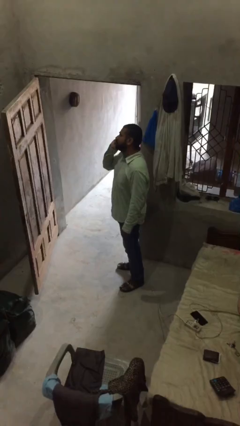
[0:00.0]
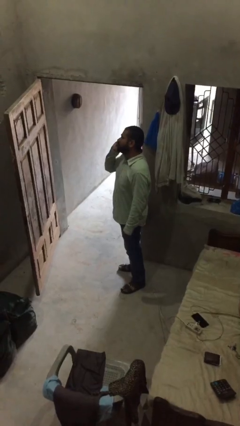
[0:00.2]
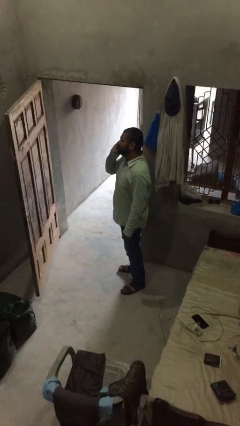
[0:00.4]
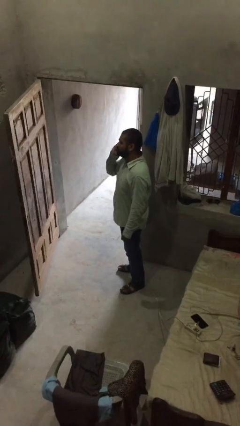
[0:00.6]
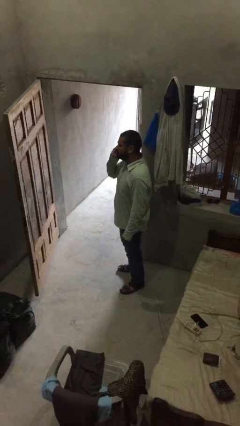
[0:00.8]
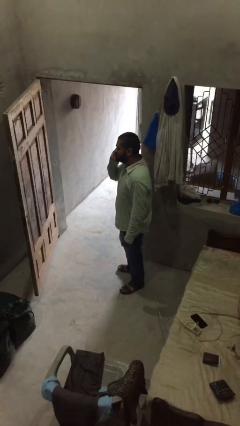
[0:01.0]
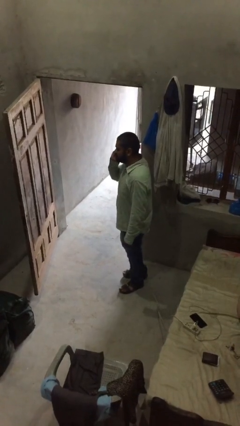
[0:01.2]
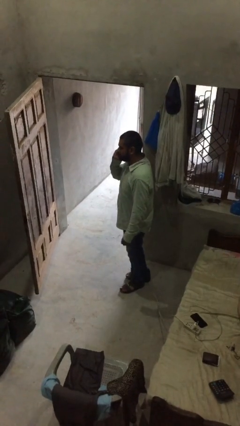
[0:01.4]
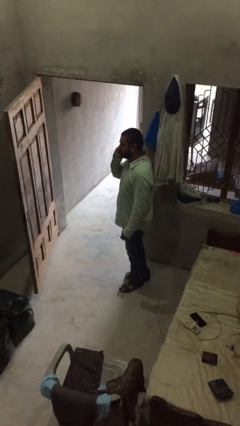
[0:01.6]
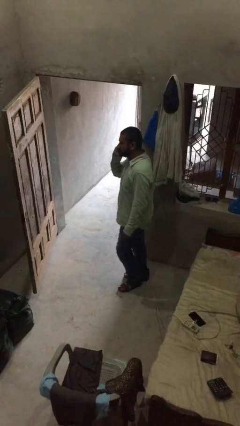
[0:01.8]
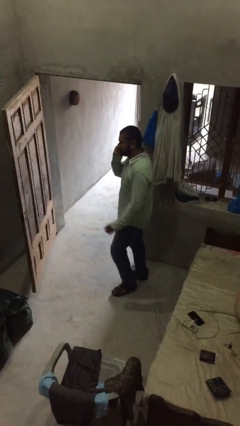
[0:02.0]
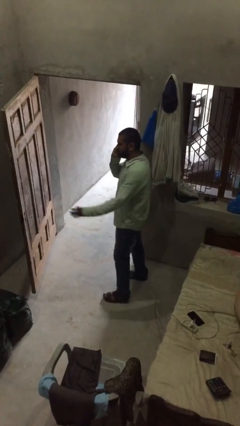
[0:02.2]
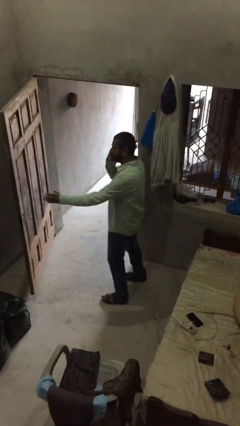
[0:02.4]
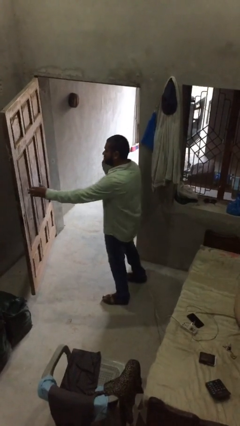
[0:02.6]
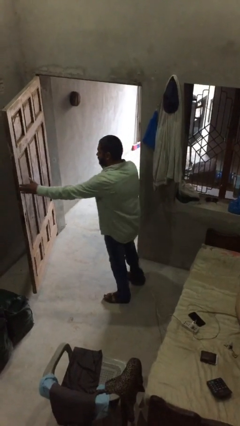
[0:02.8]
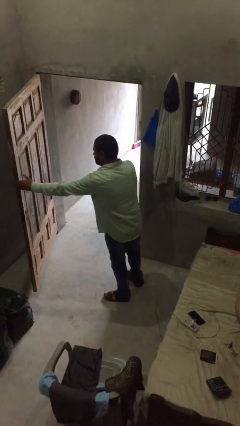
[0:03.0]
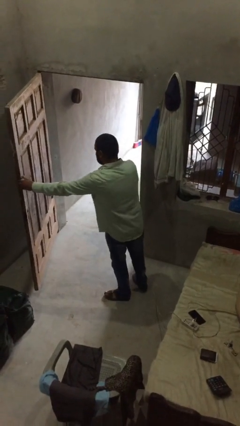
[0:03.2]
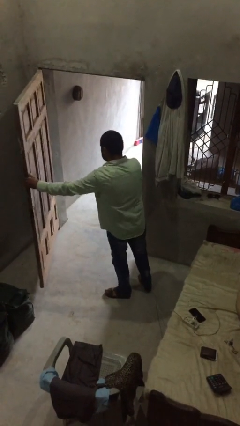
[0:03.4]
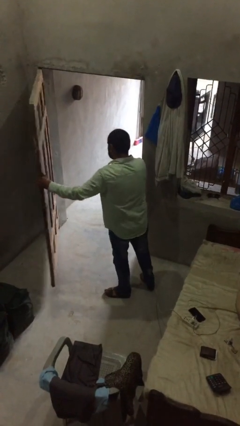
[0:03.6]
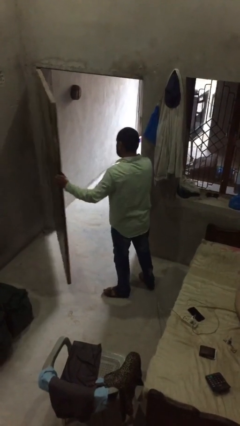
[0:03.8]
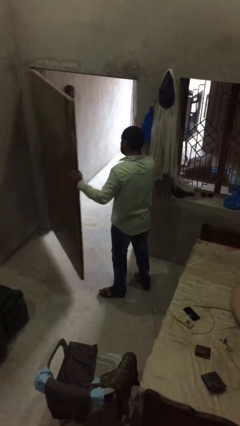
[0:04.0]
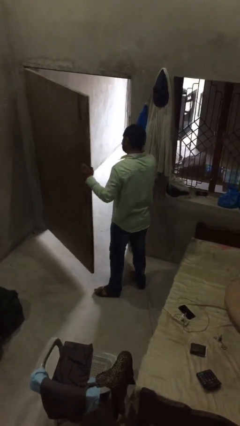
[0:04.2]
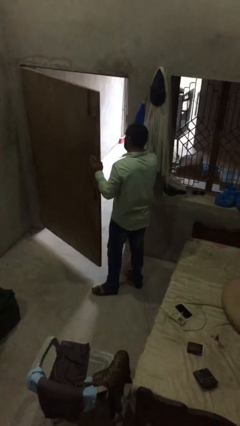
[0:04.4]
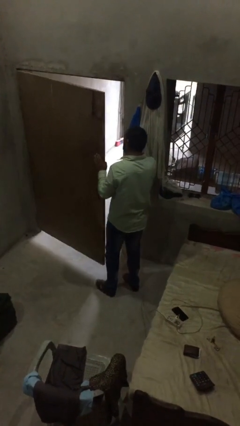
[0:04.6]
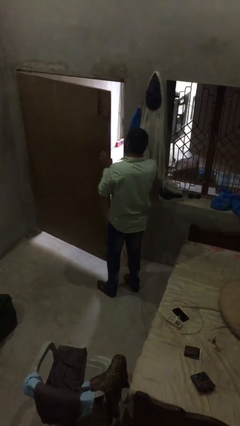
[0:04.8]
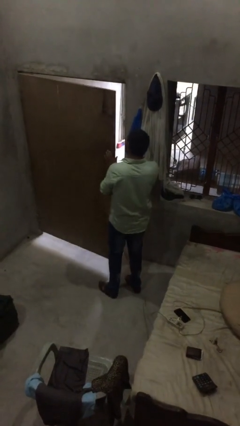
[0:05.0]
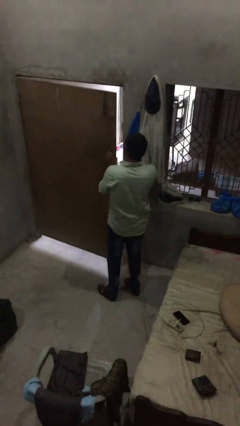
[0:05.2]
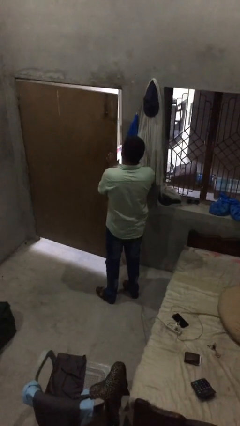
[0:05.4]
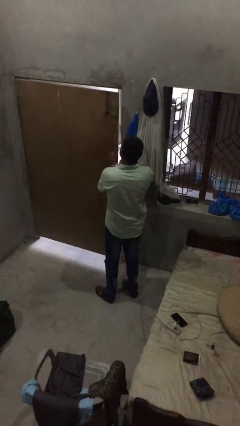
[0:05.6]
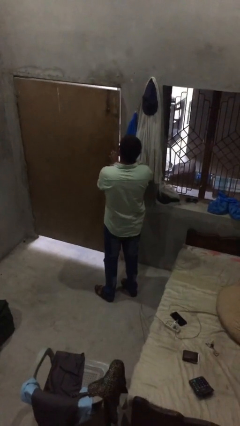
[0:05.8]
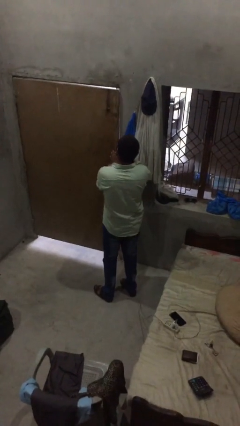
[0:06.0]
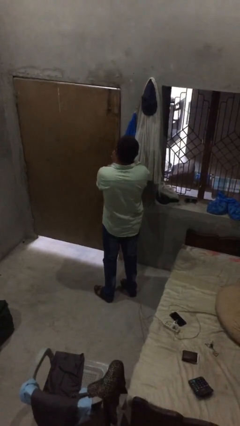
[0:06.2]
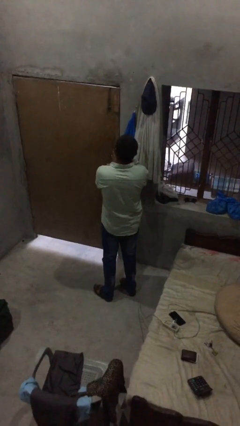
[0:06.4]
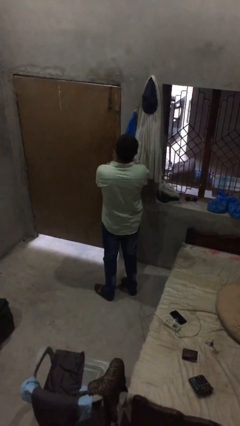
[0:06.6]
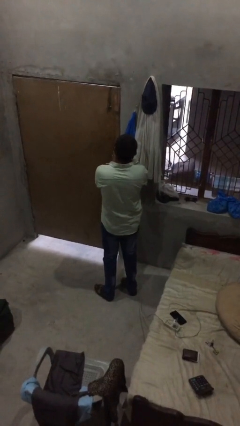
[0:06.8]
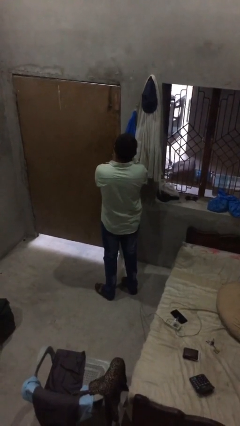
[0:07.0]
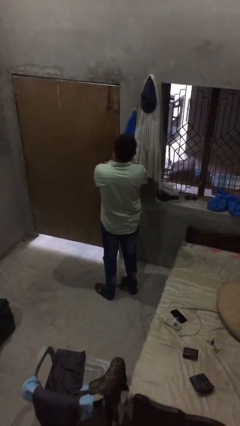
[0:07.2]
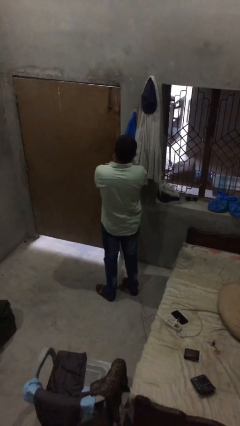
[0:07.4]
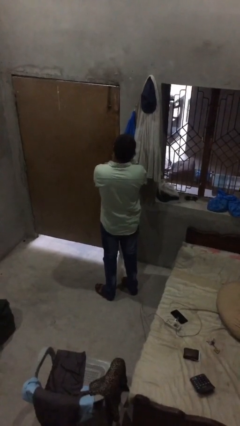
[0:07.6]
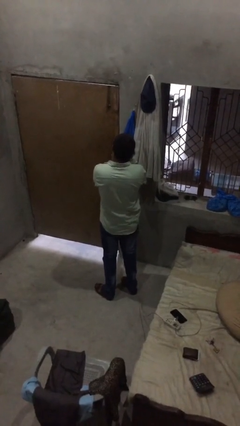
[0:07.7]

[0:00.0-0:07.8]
person closes facility door

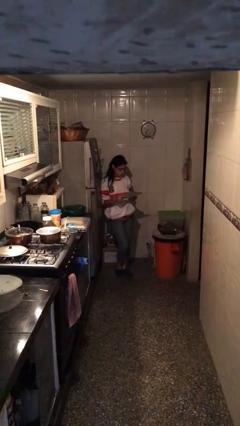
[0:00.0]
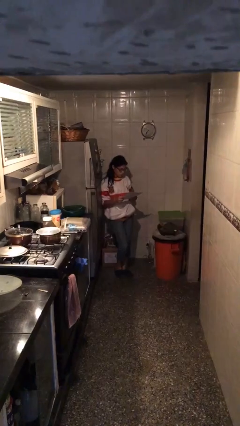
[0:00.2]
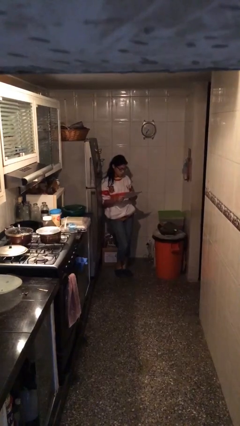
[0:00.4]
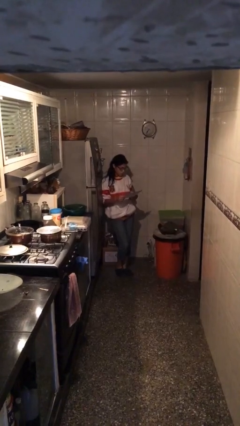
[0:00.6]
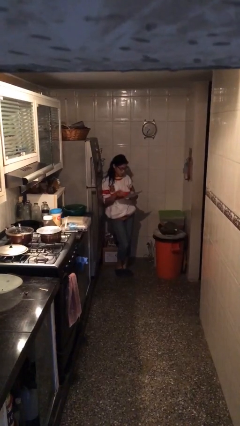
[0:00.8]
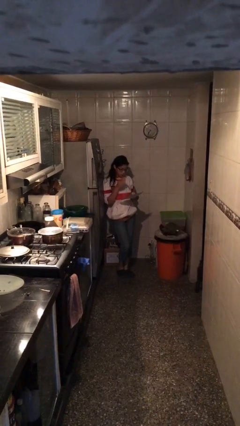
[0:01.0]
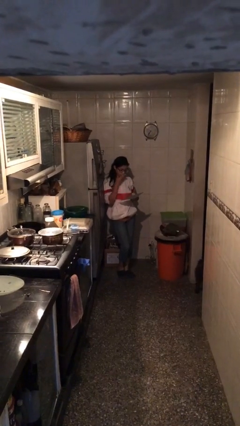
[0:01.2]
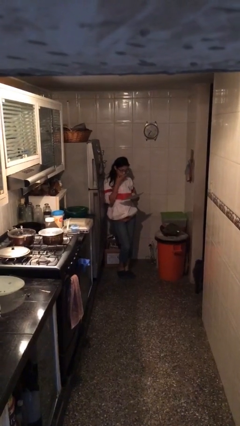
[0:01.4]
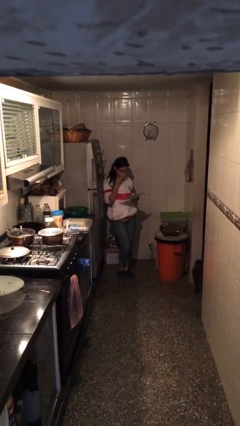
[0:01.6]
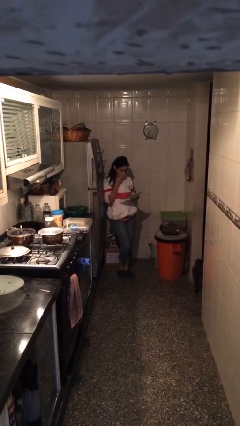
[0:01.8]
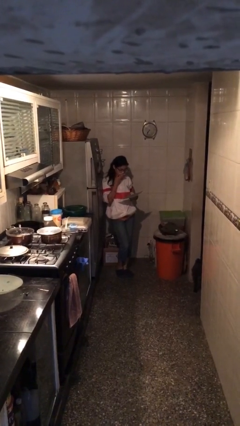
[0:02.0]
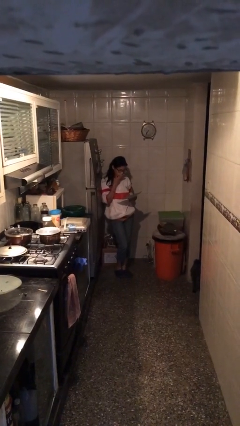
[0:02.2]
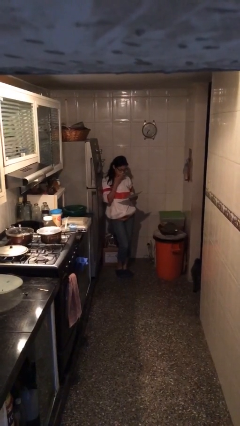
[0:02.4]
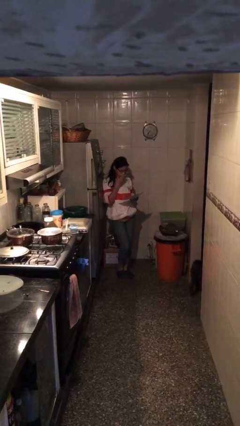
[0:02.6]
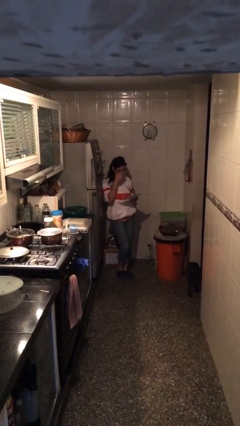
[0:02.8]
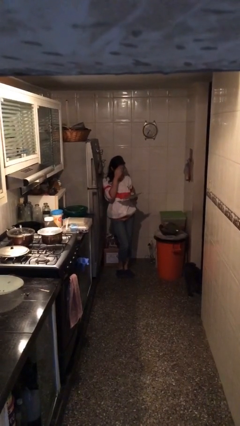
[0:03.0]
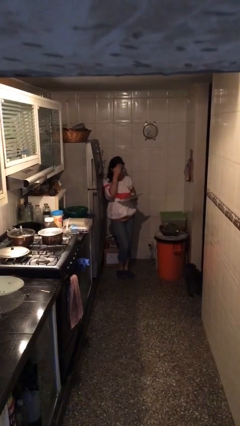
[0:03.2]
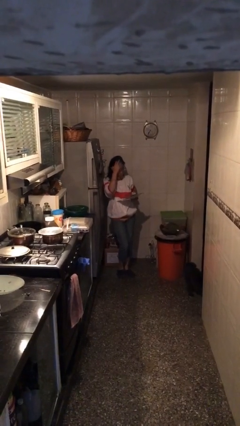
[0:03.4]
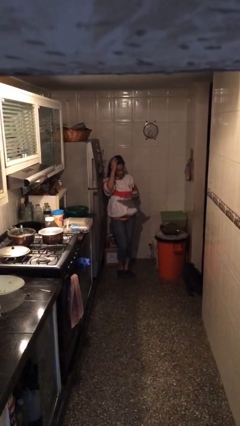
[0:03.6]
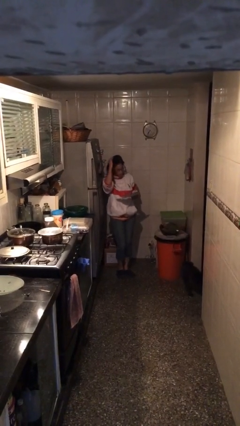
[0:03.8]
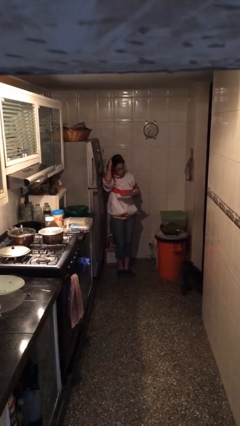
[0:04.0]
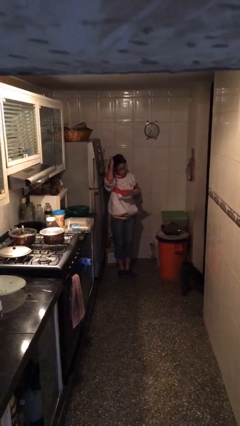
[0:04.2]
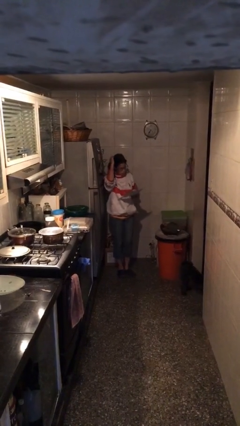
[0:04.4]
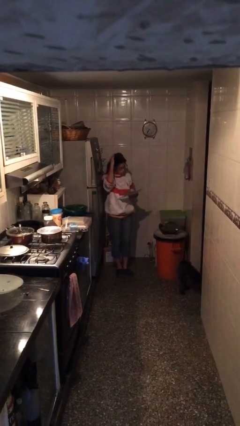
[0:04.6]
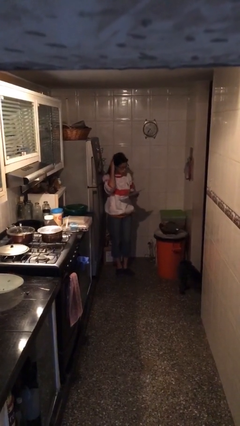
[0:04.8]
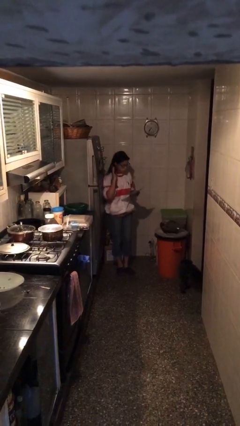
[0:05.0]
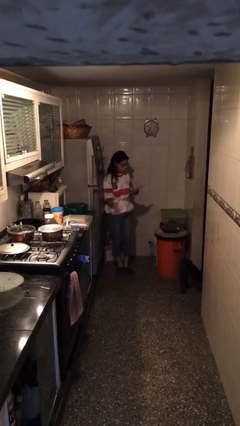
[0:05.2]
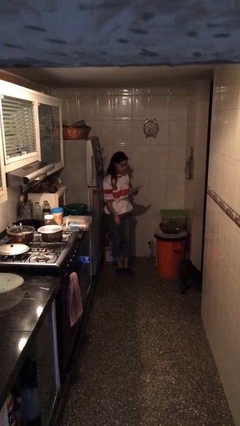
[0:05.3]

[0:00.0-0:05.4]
person reads document

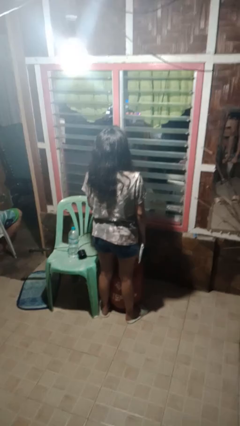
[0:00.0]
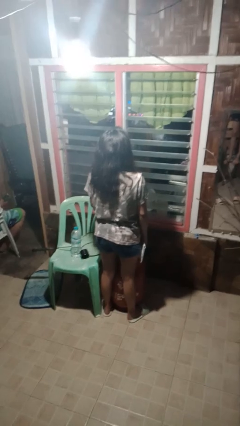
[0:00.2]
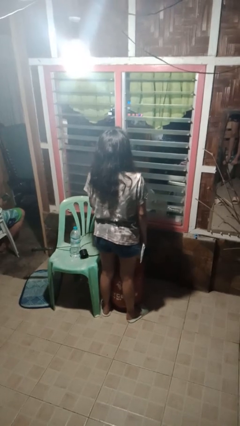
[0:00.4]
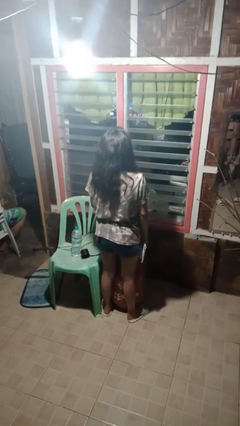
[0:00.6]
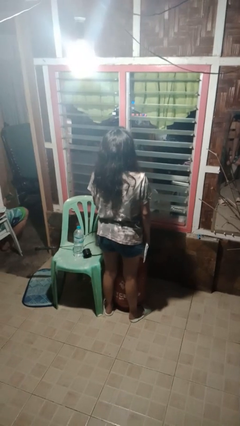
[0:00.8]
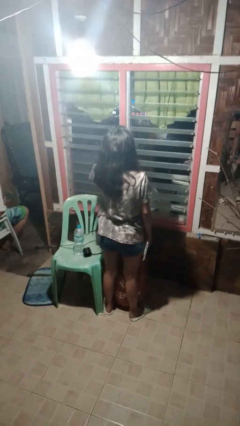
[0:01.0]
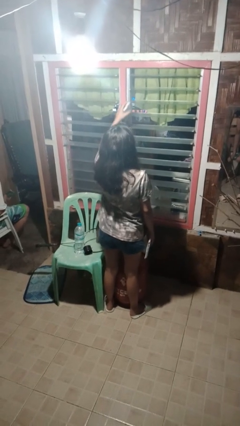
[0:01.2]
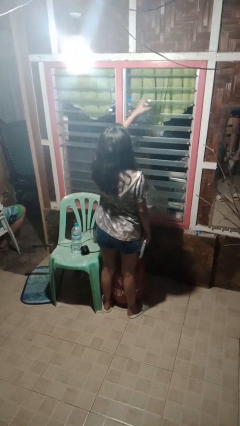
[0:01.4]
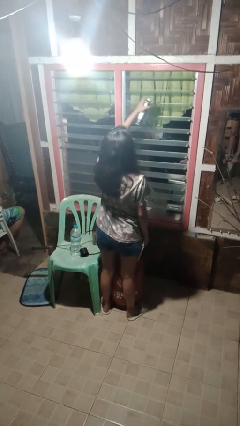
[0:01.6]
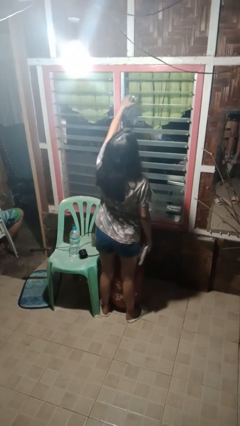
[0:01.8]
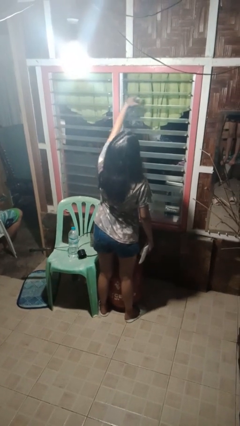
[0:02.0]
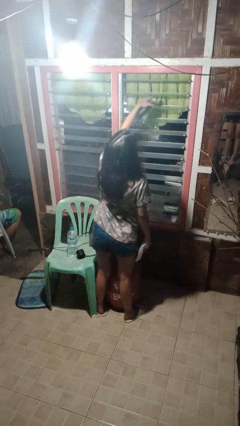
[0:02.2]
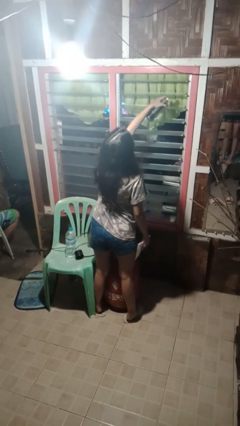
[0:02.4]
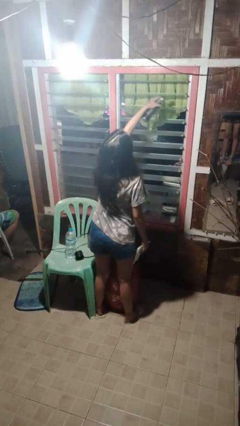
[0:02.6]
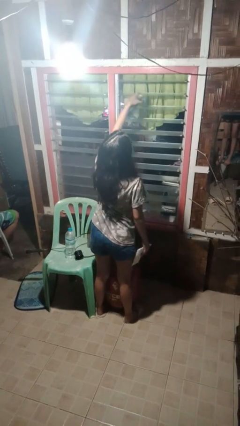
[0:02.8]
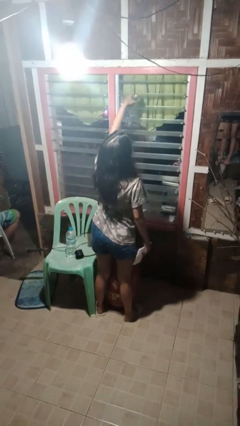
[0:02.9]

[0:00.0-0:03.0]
person sprays from bottle

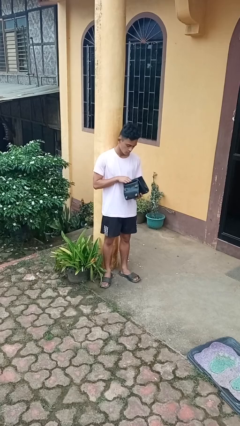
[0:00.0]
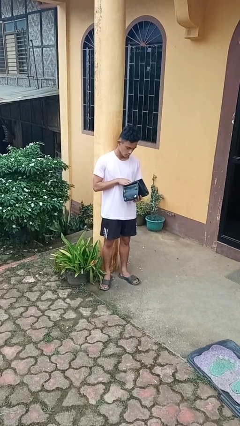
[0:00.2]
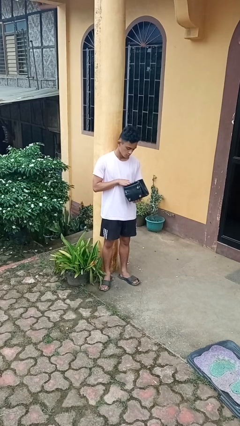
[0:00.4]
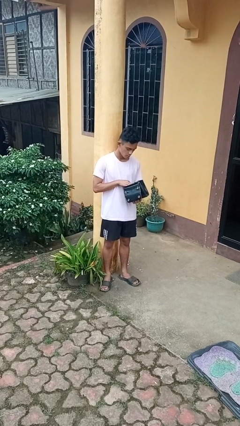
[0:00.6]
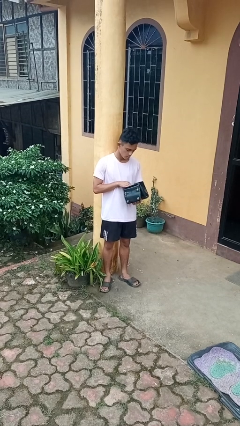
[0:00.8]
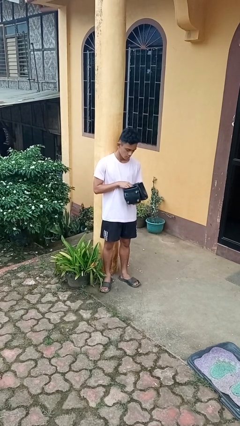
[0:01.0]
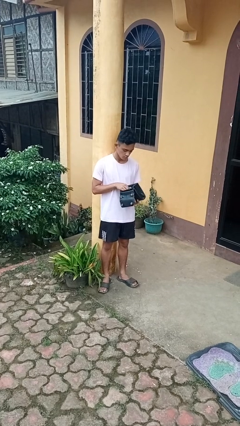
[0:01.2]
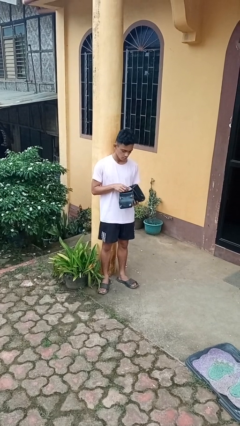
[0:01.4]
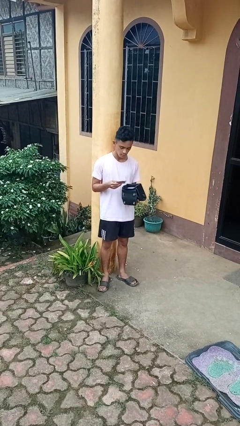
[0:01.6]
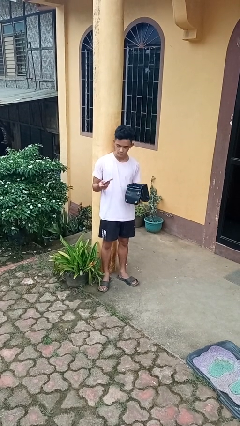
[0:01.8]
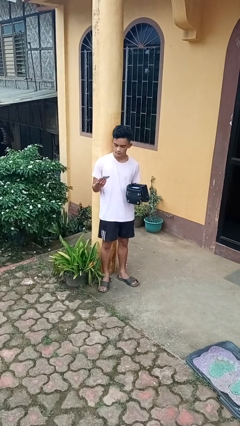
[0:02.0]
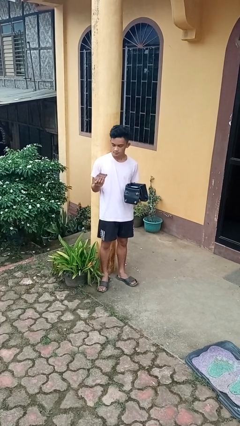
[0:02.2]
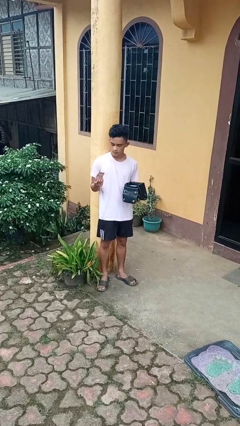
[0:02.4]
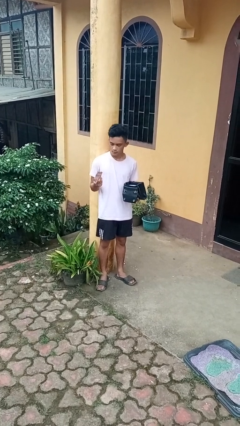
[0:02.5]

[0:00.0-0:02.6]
person searches in purse
